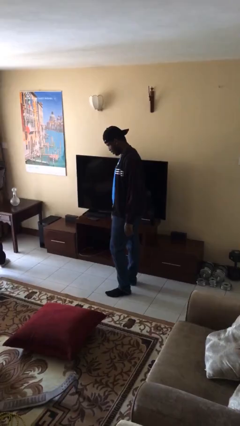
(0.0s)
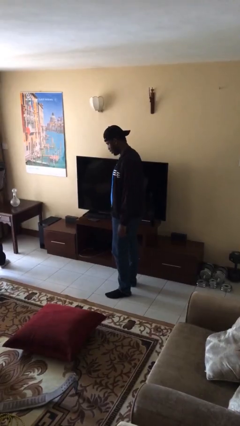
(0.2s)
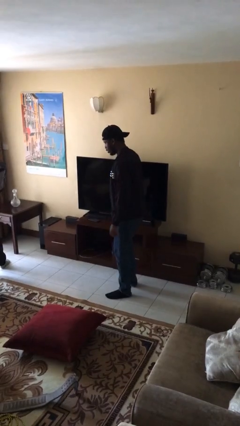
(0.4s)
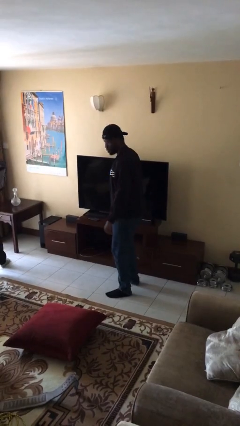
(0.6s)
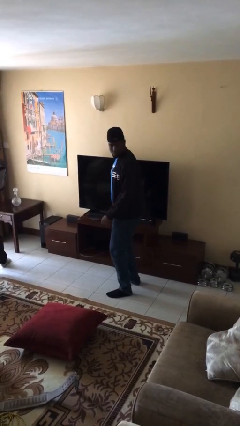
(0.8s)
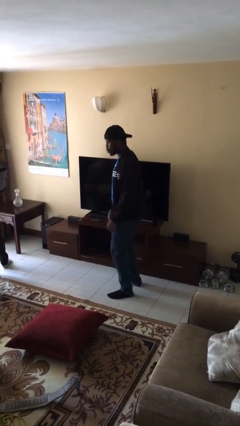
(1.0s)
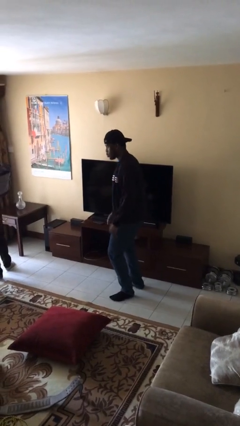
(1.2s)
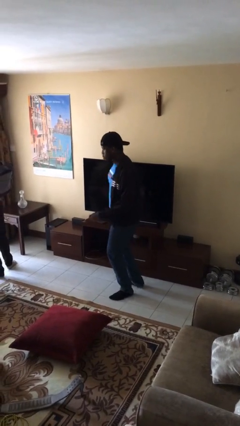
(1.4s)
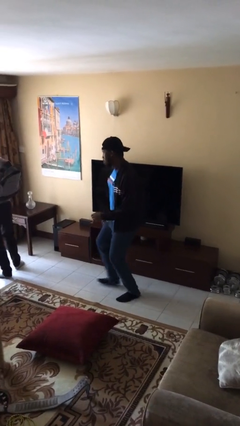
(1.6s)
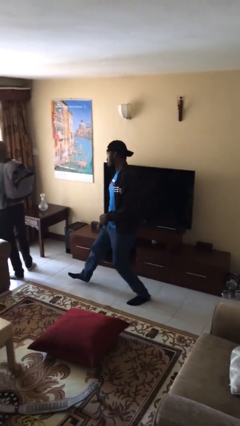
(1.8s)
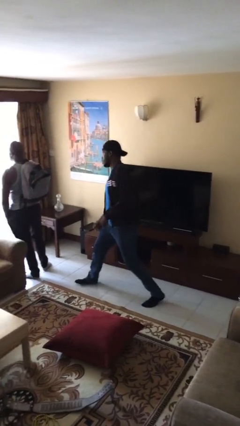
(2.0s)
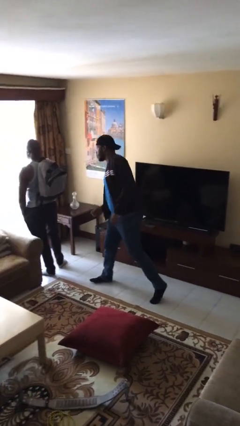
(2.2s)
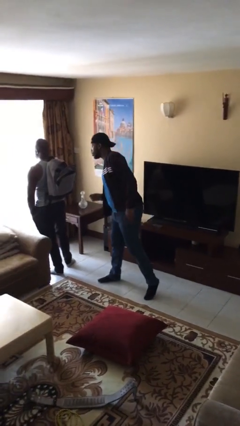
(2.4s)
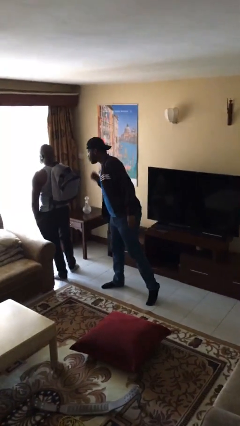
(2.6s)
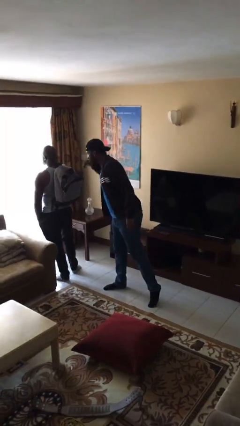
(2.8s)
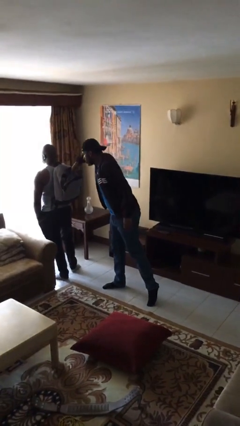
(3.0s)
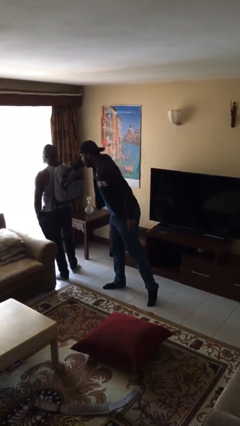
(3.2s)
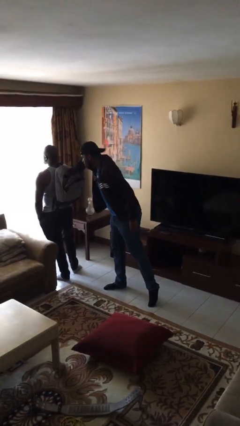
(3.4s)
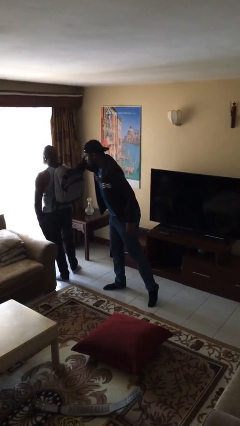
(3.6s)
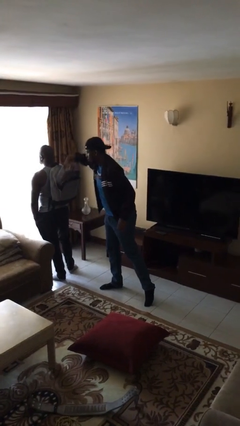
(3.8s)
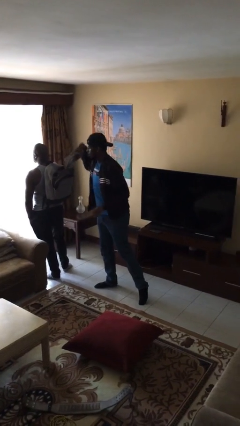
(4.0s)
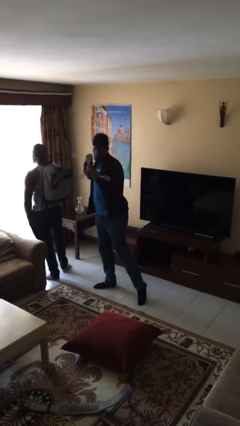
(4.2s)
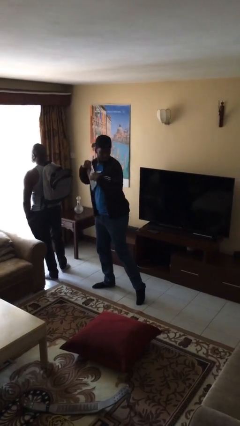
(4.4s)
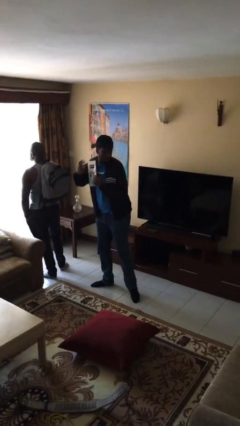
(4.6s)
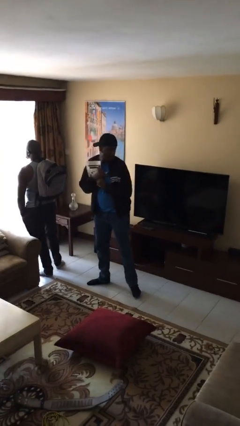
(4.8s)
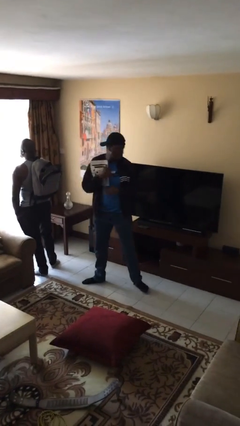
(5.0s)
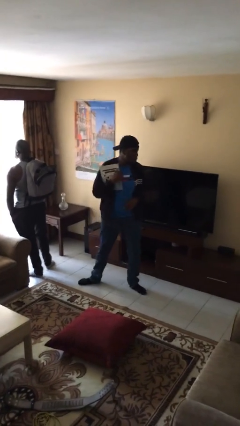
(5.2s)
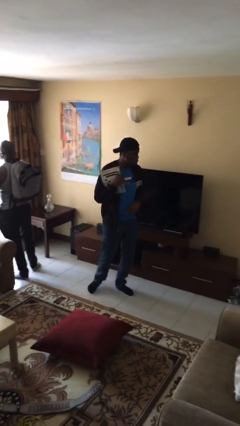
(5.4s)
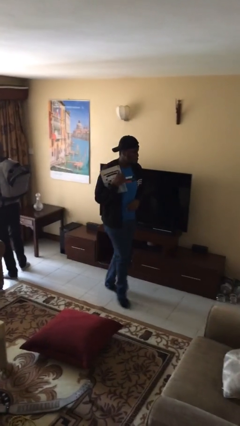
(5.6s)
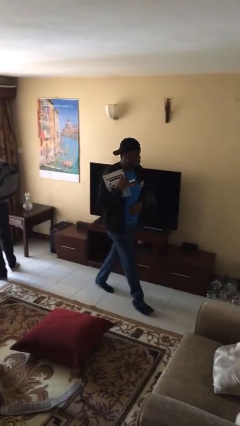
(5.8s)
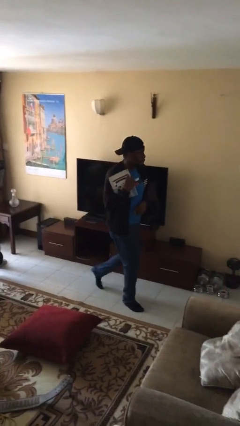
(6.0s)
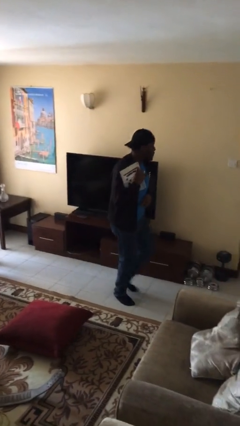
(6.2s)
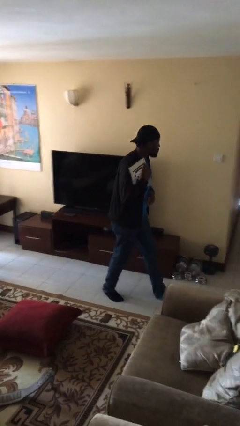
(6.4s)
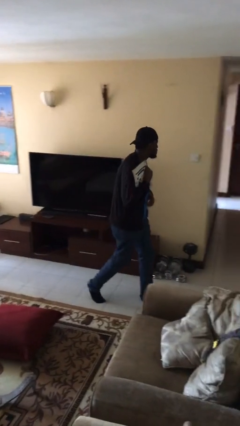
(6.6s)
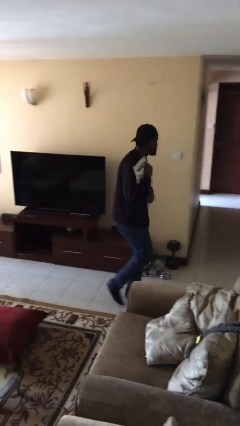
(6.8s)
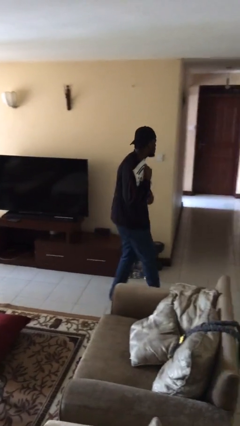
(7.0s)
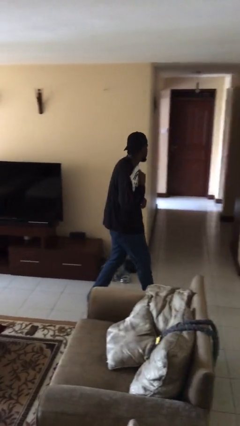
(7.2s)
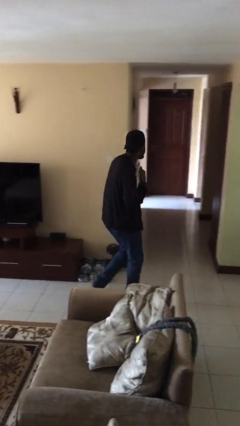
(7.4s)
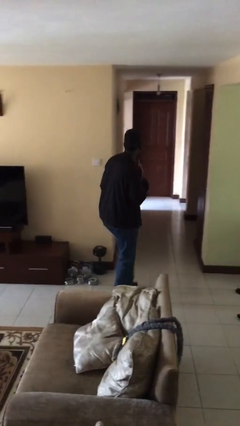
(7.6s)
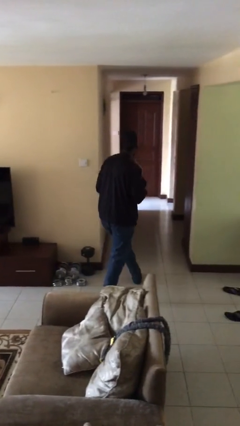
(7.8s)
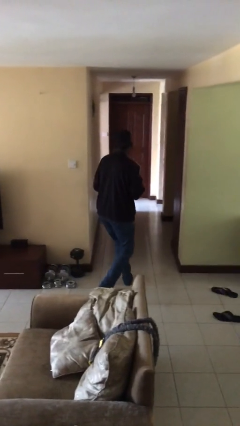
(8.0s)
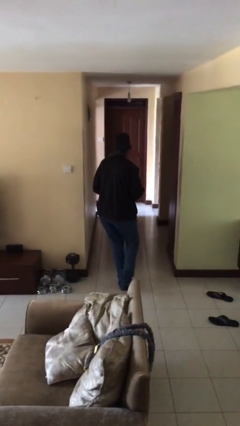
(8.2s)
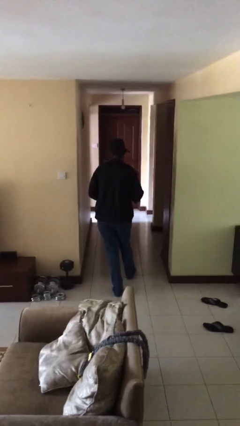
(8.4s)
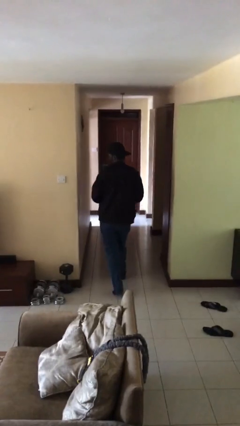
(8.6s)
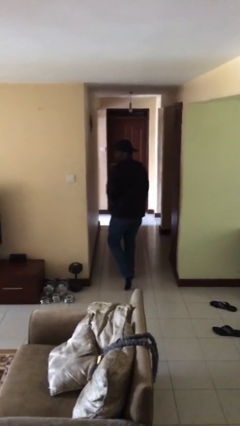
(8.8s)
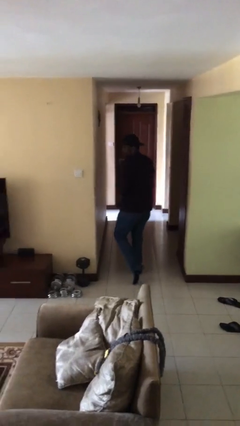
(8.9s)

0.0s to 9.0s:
person steals object from person

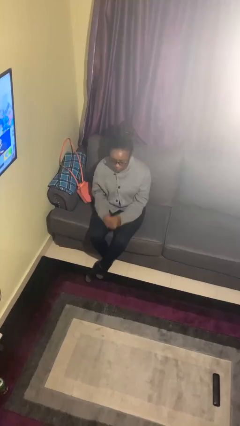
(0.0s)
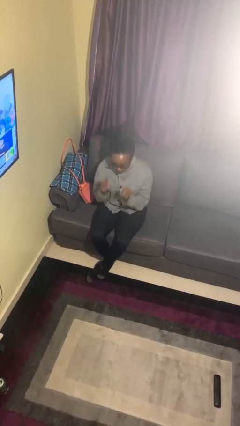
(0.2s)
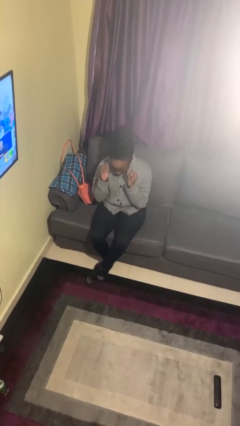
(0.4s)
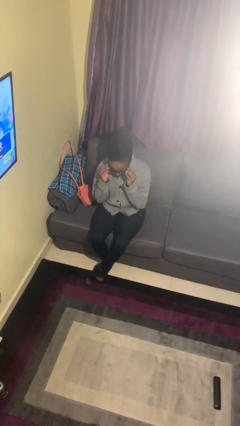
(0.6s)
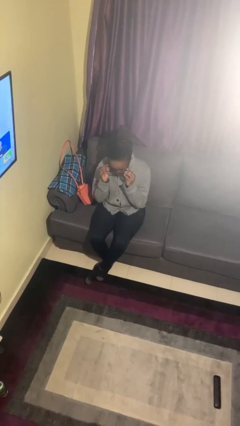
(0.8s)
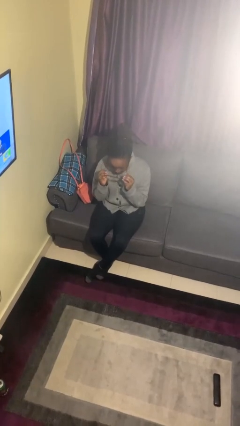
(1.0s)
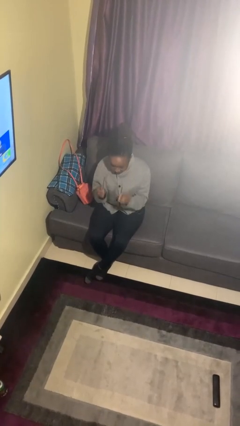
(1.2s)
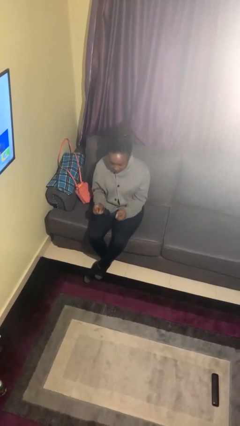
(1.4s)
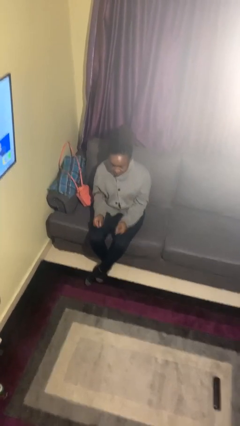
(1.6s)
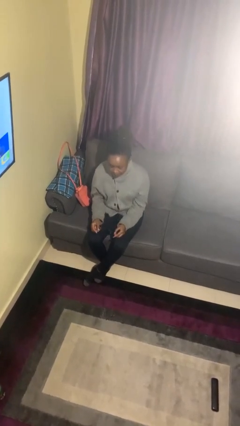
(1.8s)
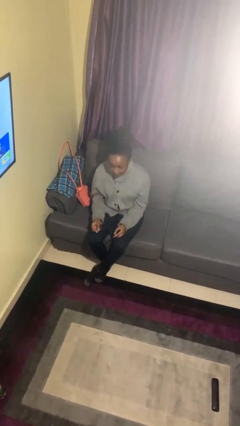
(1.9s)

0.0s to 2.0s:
person takes off glasses

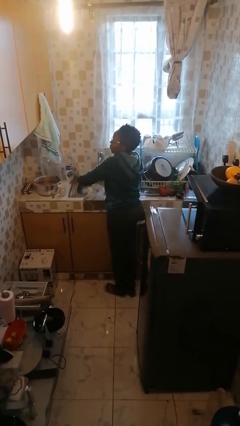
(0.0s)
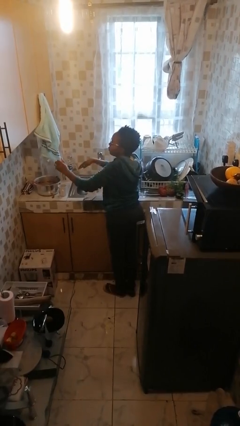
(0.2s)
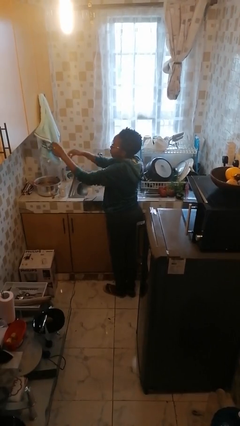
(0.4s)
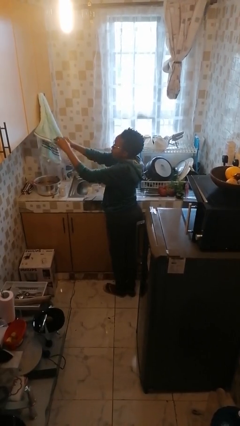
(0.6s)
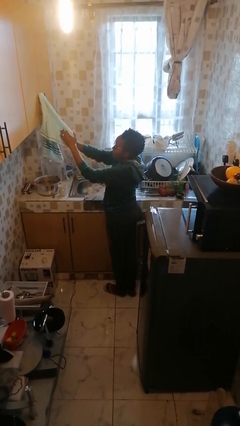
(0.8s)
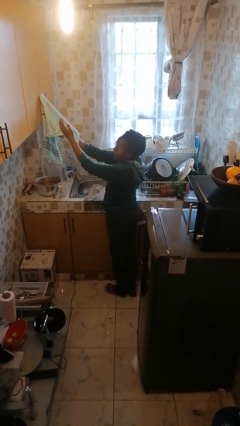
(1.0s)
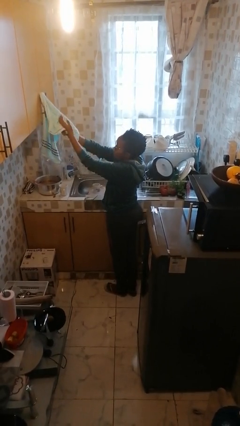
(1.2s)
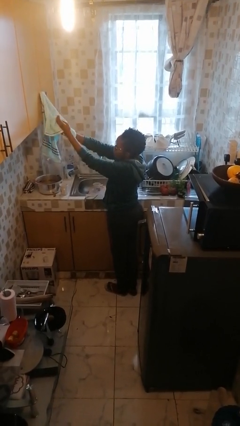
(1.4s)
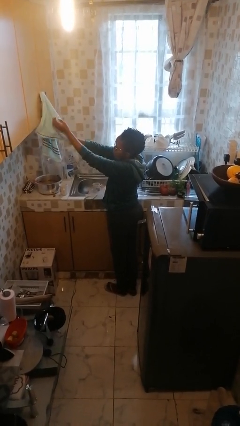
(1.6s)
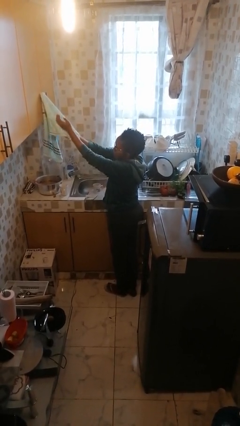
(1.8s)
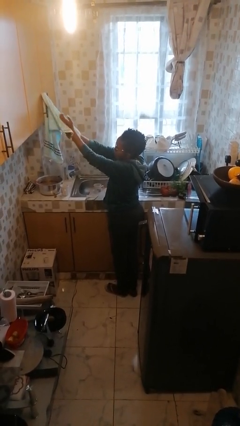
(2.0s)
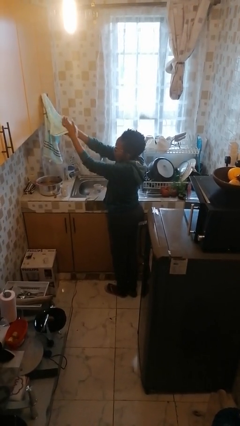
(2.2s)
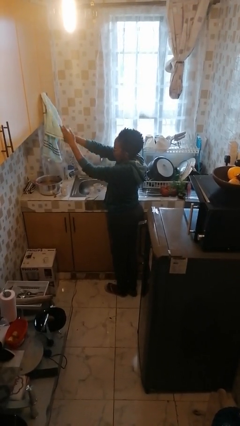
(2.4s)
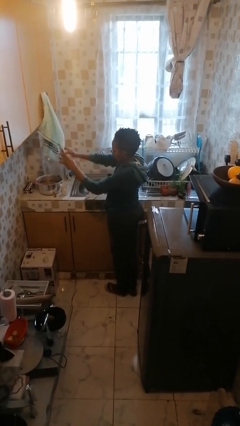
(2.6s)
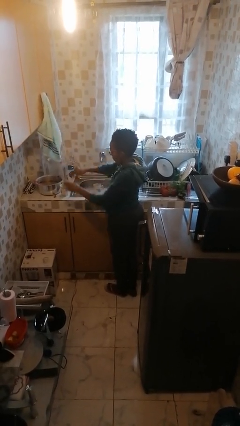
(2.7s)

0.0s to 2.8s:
person dries hands with towel

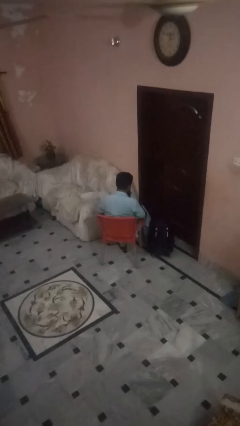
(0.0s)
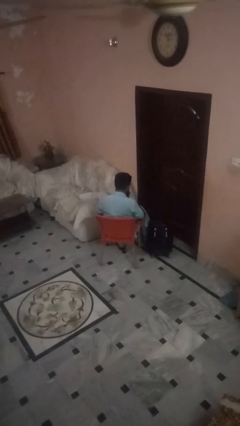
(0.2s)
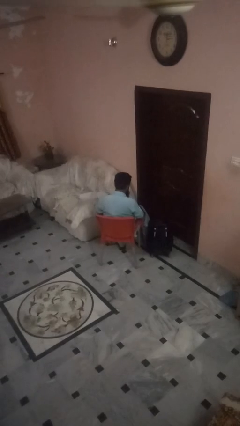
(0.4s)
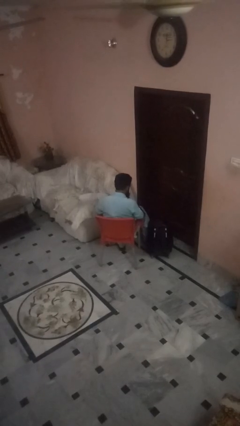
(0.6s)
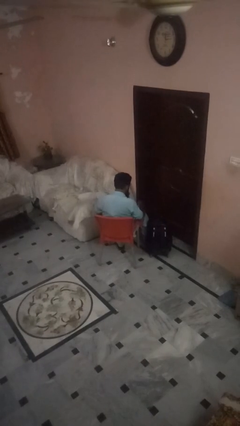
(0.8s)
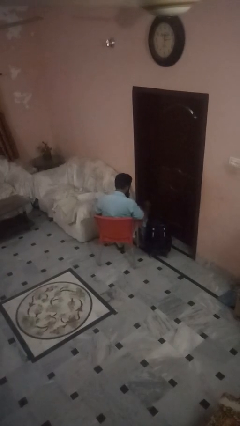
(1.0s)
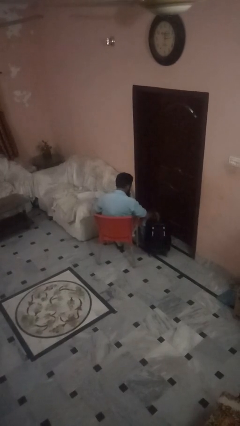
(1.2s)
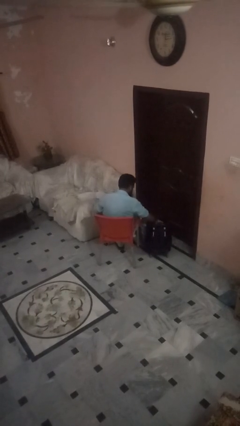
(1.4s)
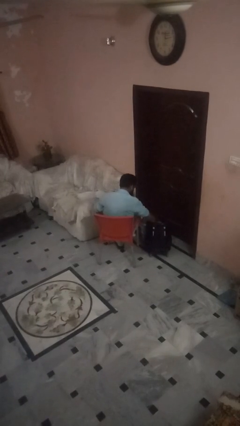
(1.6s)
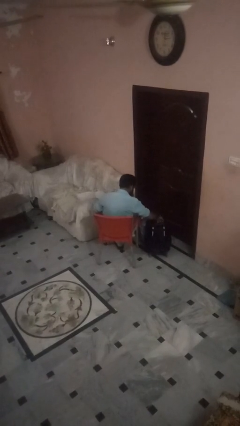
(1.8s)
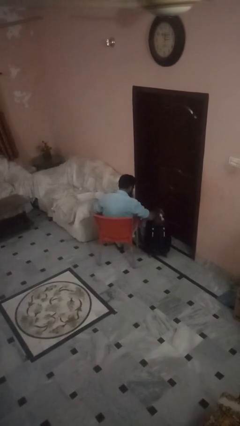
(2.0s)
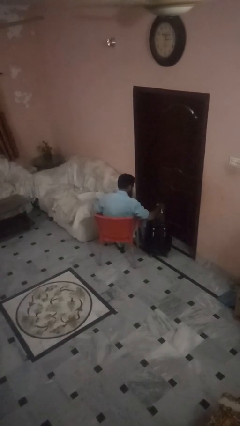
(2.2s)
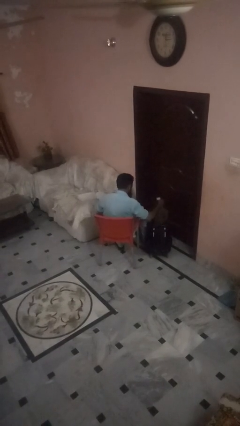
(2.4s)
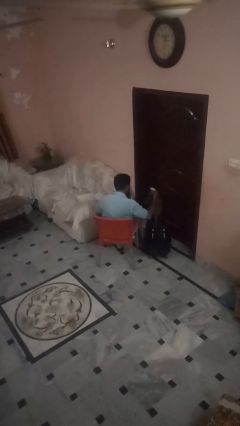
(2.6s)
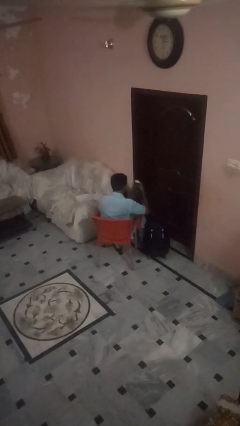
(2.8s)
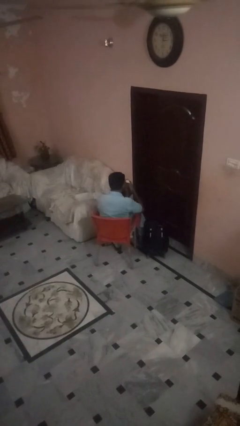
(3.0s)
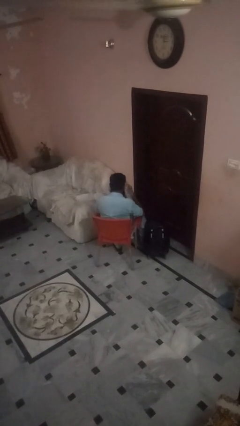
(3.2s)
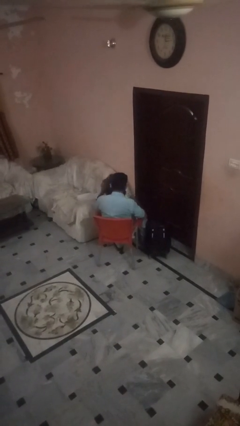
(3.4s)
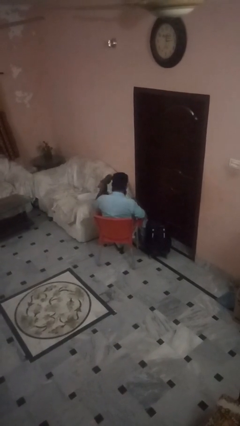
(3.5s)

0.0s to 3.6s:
person unloads clothes from suitcase

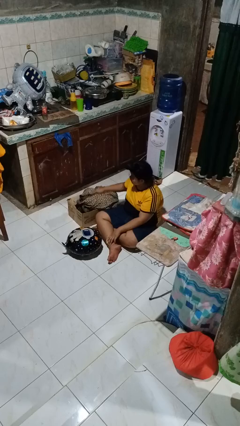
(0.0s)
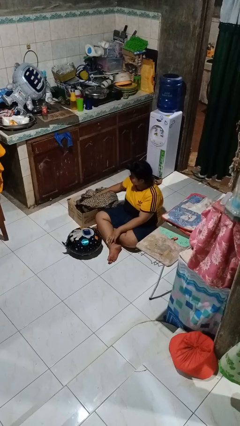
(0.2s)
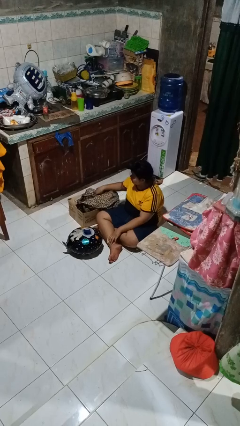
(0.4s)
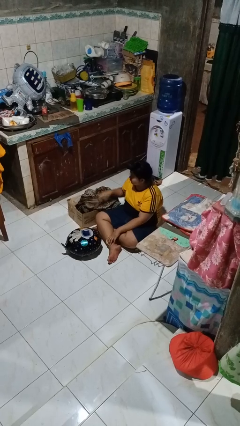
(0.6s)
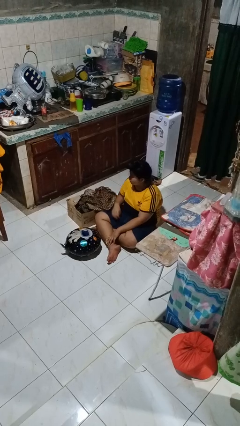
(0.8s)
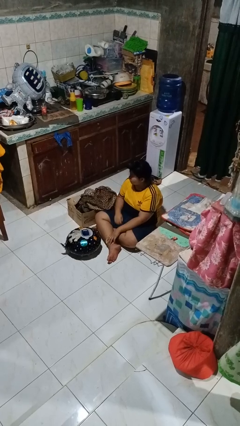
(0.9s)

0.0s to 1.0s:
person puts object into box
